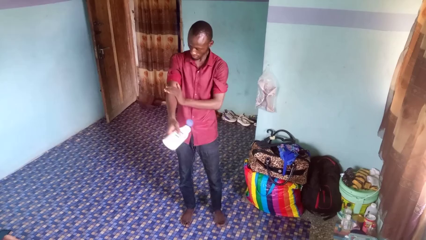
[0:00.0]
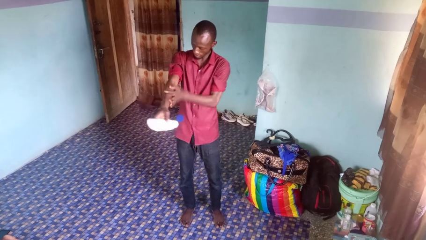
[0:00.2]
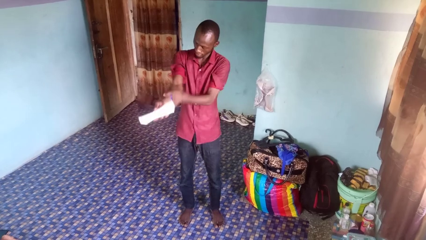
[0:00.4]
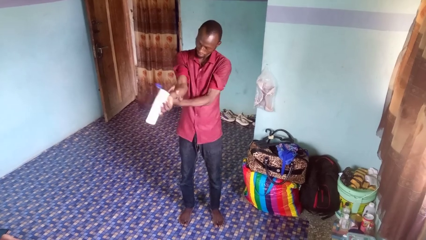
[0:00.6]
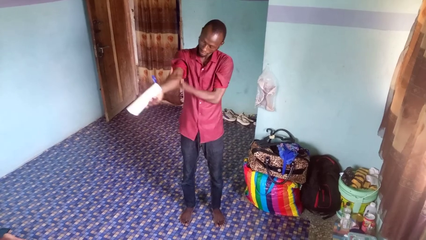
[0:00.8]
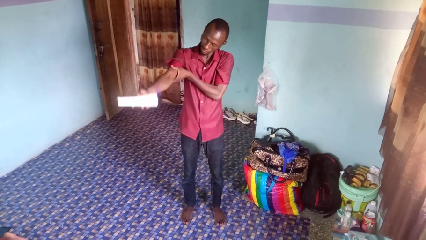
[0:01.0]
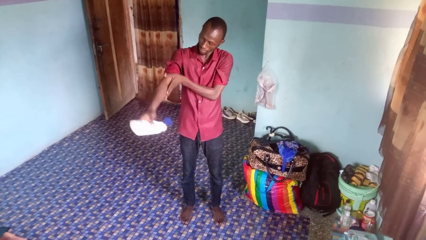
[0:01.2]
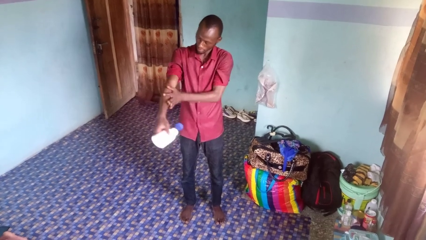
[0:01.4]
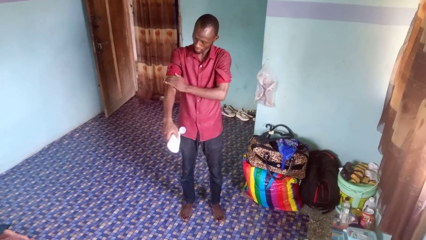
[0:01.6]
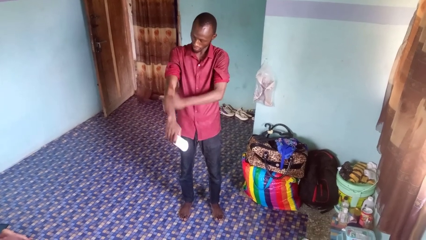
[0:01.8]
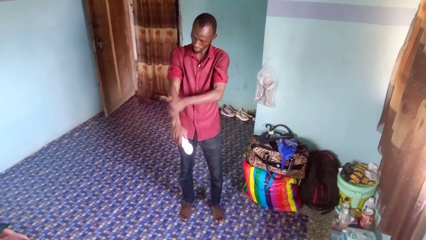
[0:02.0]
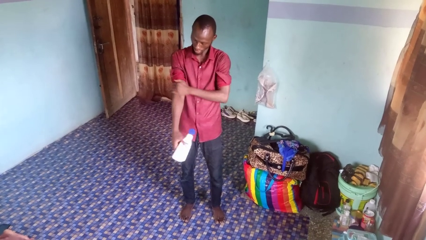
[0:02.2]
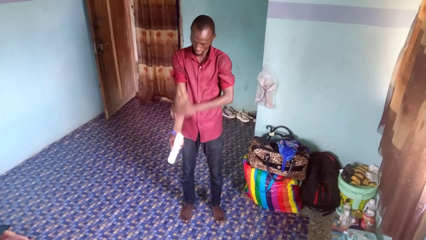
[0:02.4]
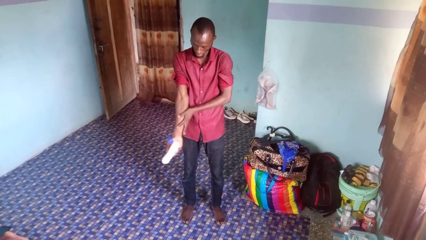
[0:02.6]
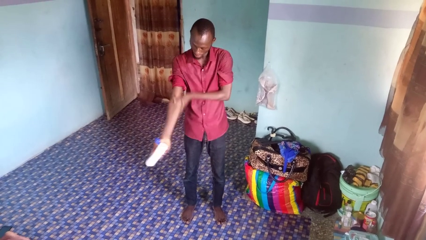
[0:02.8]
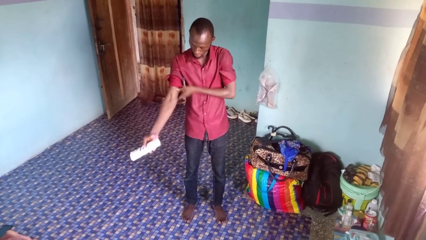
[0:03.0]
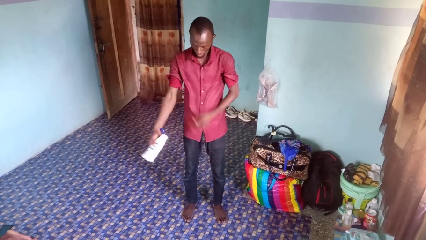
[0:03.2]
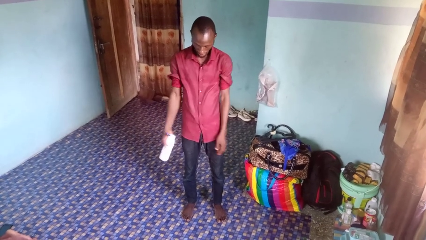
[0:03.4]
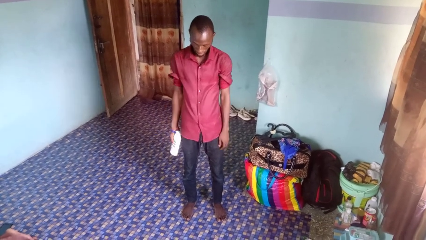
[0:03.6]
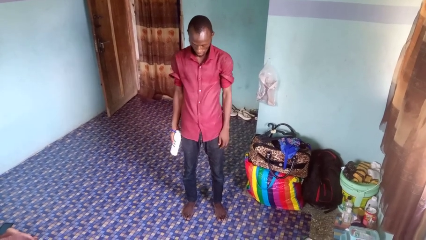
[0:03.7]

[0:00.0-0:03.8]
person applies sunscreen

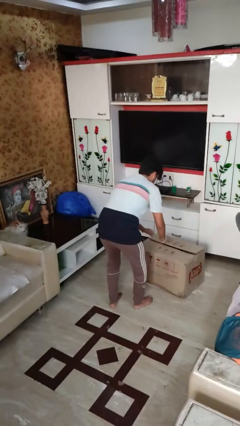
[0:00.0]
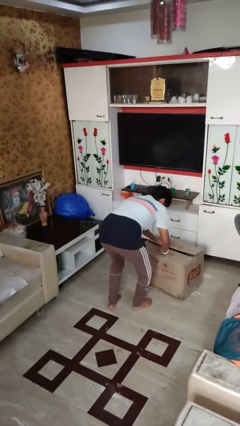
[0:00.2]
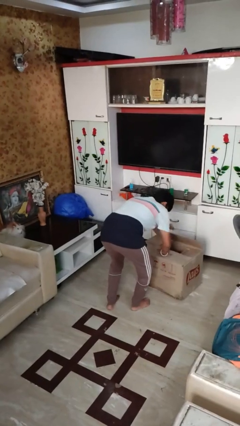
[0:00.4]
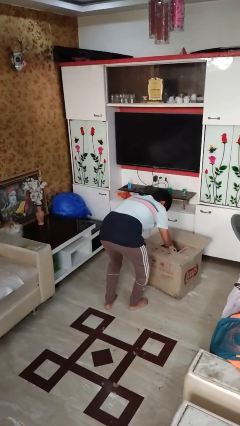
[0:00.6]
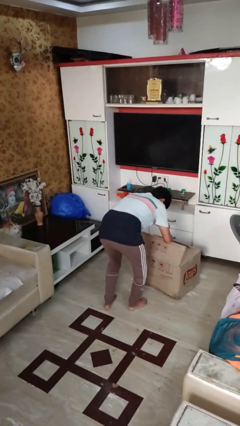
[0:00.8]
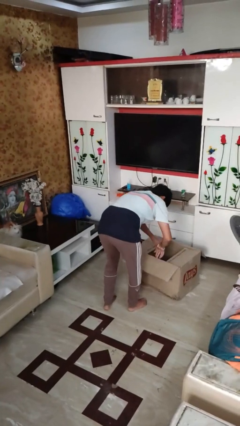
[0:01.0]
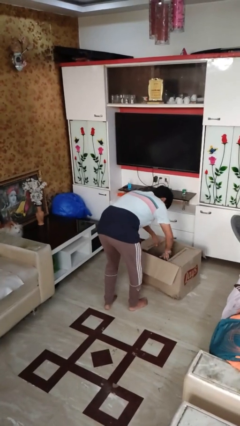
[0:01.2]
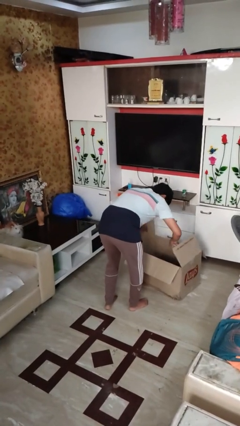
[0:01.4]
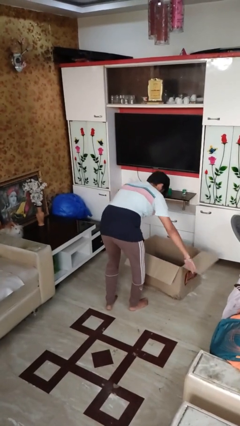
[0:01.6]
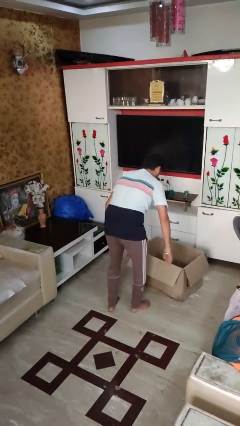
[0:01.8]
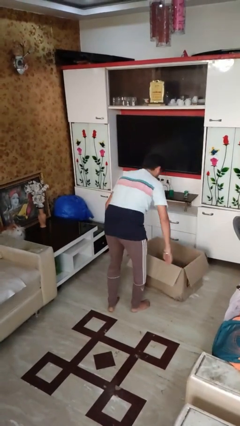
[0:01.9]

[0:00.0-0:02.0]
person opens box

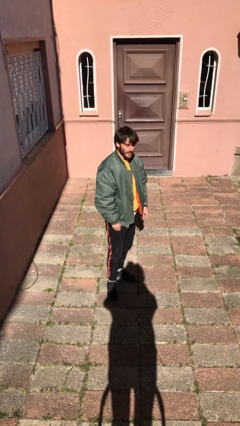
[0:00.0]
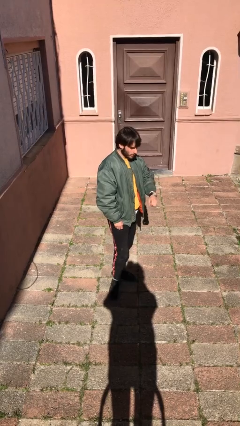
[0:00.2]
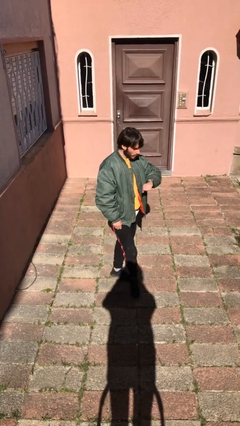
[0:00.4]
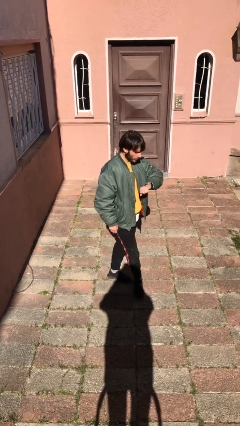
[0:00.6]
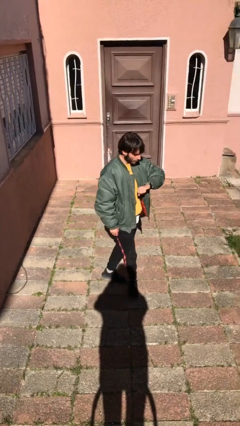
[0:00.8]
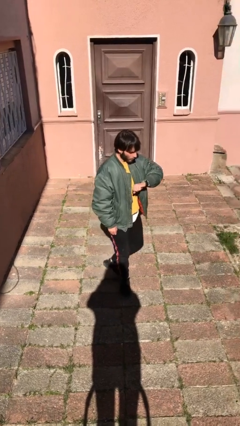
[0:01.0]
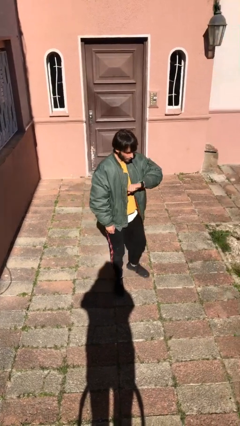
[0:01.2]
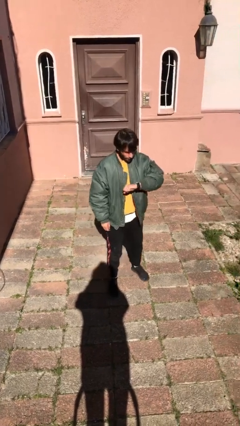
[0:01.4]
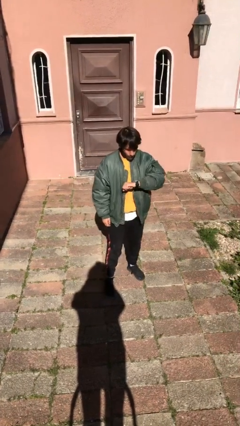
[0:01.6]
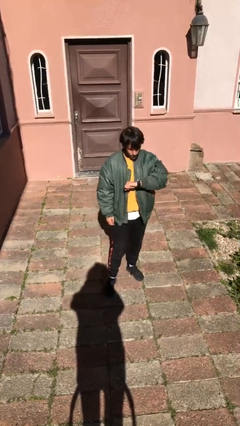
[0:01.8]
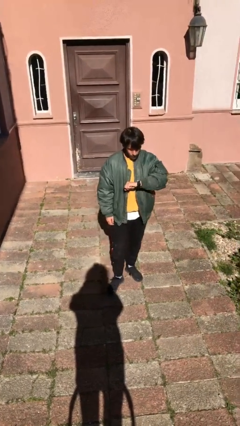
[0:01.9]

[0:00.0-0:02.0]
person looks at wristwatch

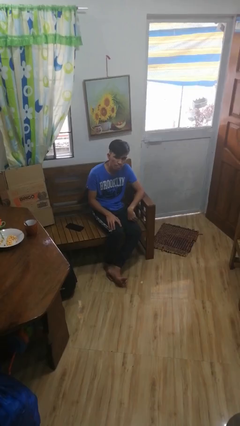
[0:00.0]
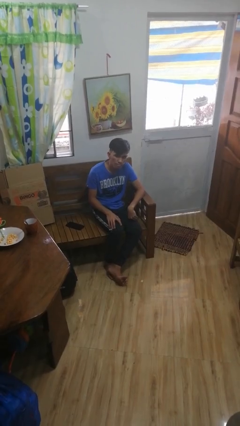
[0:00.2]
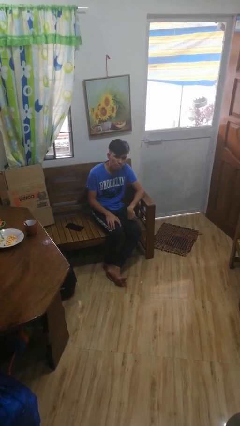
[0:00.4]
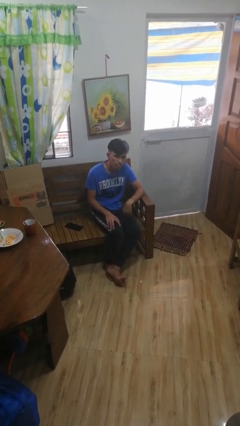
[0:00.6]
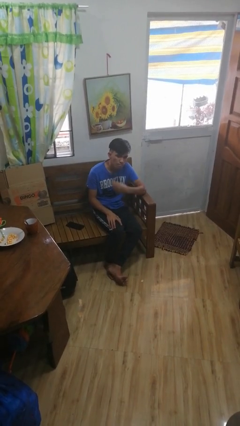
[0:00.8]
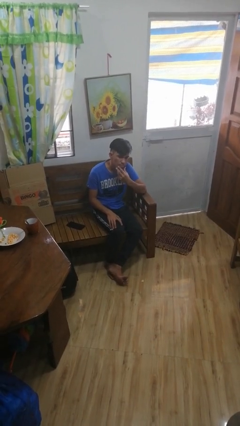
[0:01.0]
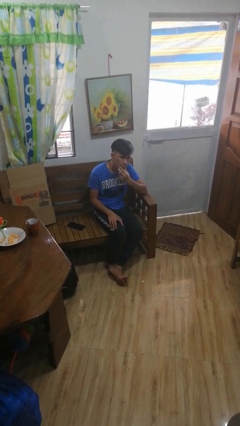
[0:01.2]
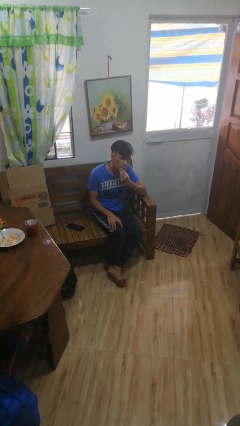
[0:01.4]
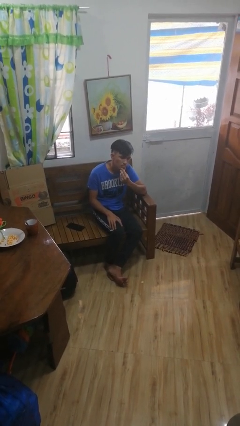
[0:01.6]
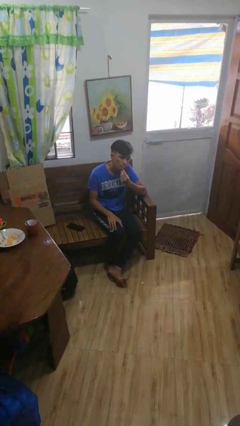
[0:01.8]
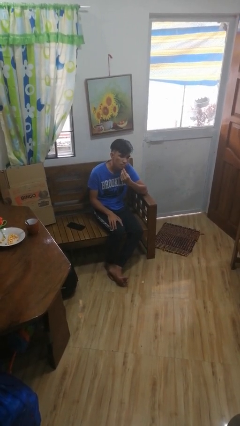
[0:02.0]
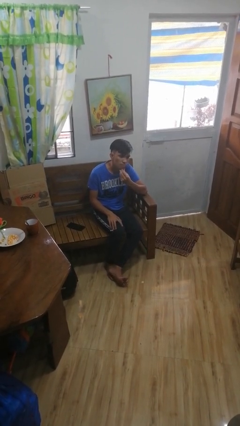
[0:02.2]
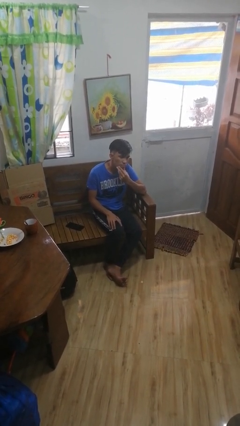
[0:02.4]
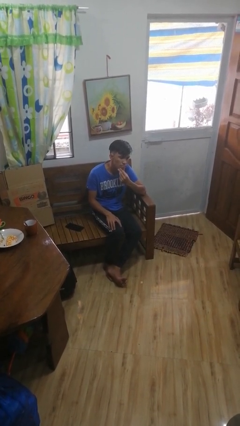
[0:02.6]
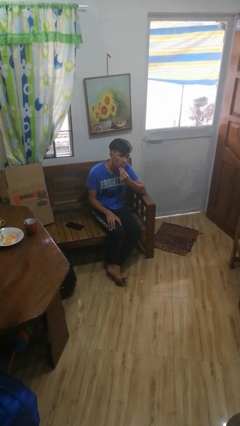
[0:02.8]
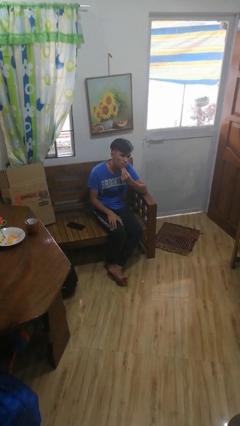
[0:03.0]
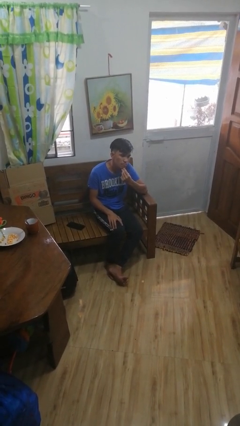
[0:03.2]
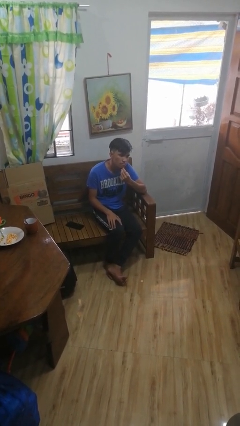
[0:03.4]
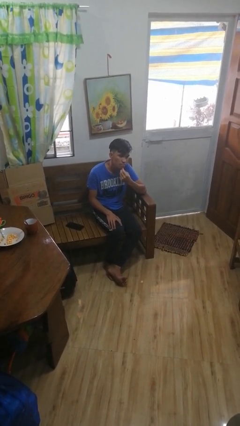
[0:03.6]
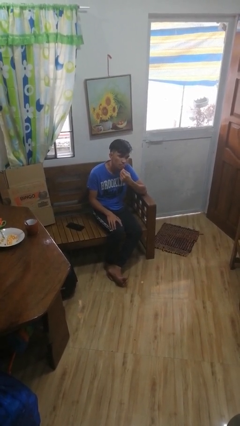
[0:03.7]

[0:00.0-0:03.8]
person strokes chin

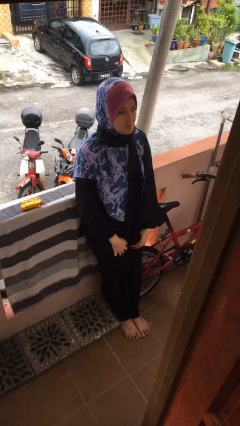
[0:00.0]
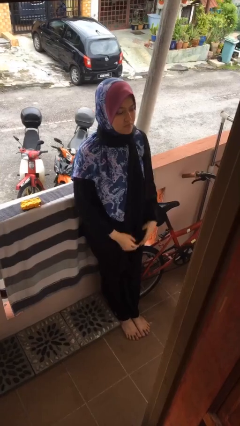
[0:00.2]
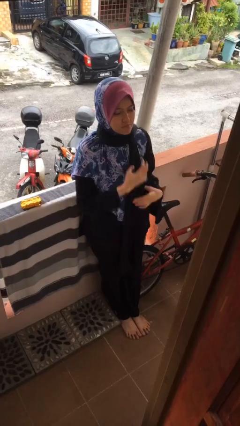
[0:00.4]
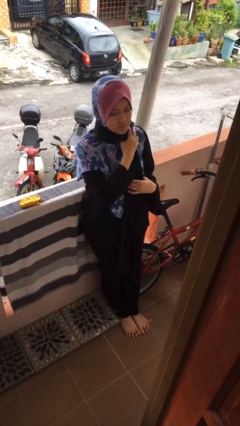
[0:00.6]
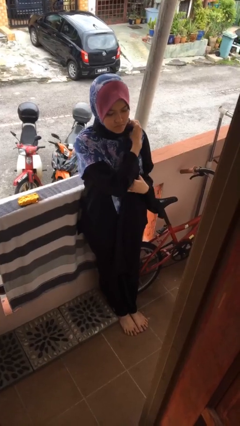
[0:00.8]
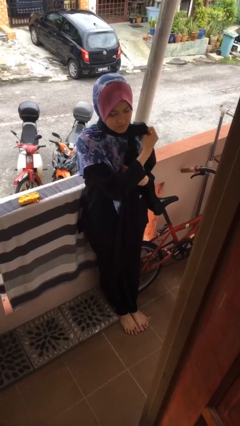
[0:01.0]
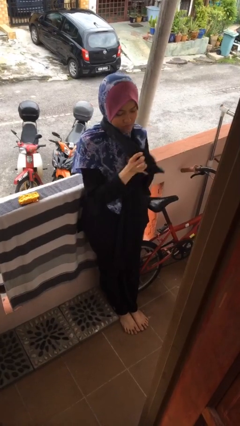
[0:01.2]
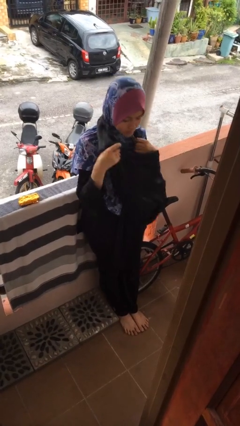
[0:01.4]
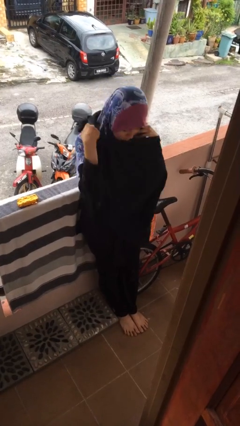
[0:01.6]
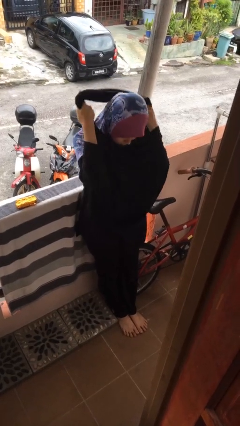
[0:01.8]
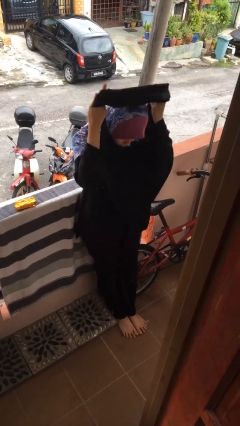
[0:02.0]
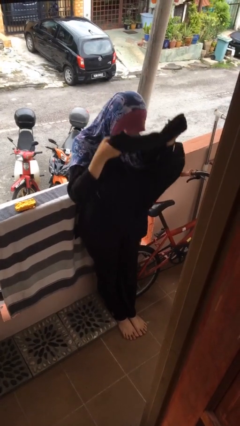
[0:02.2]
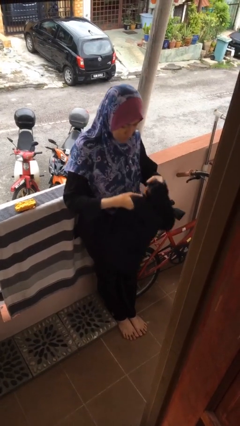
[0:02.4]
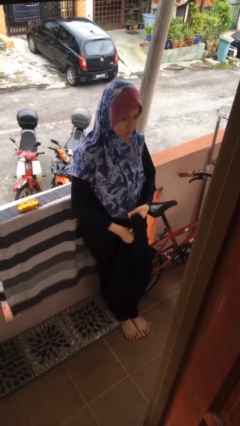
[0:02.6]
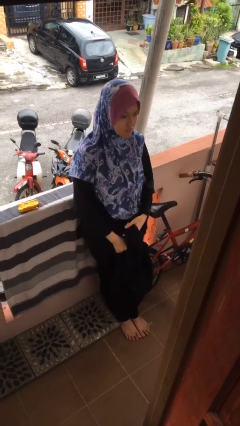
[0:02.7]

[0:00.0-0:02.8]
person takes off scarf

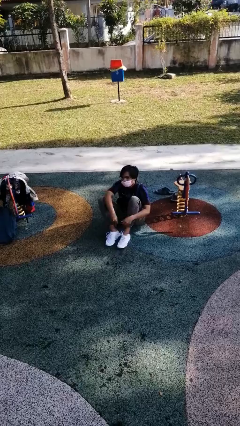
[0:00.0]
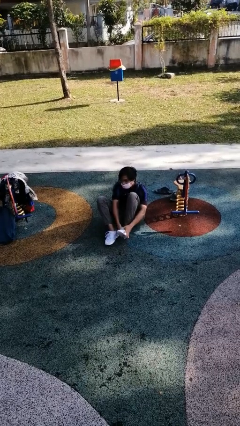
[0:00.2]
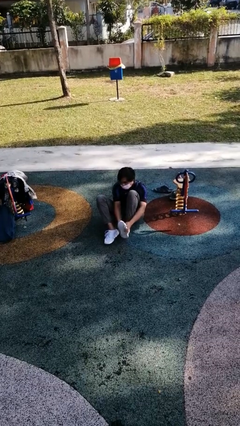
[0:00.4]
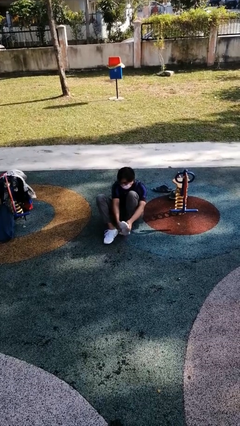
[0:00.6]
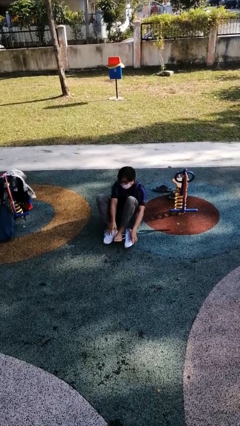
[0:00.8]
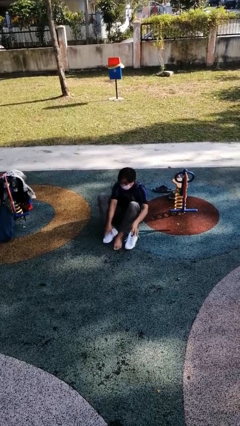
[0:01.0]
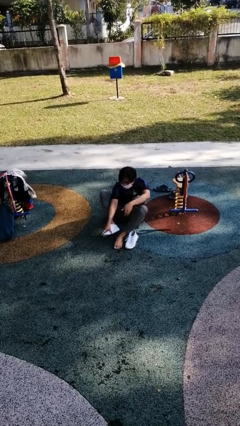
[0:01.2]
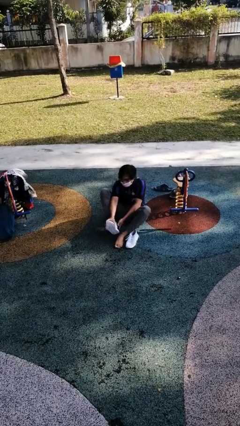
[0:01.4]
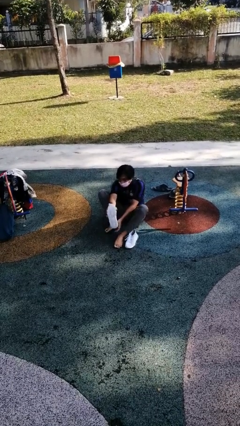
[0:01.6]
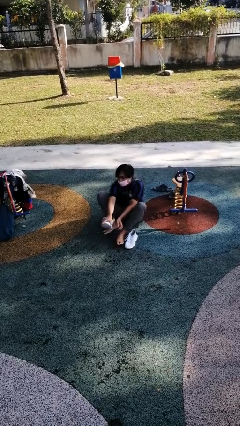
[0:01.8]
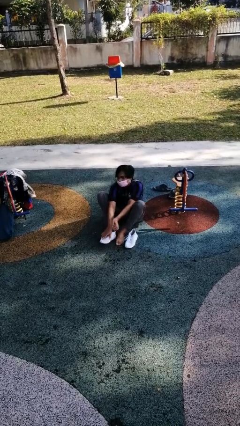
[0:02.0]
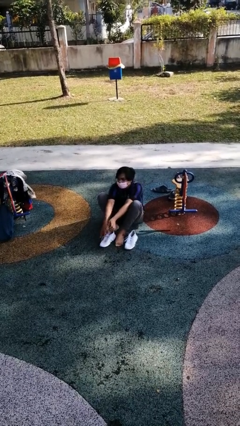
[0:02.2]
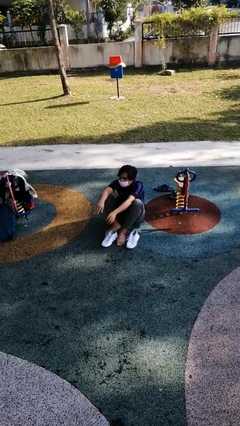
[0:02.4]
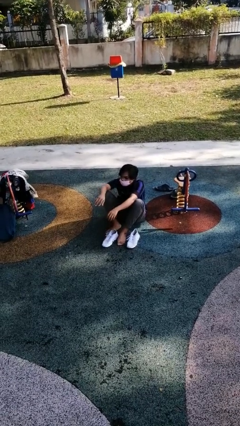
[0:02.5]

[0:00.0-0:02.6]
person takes off shoes

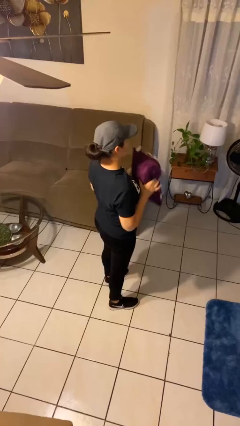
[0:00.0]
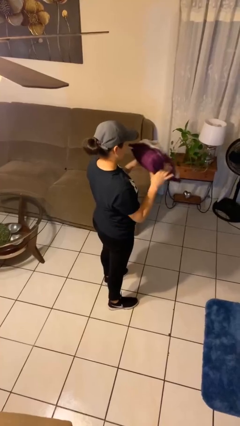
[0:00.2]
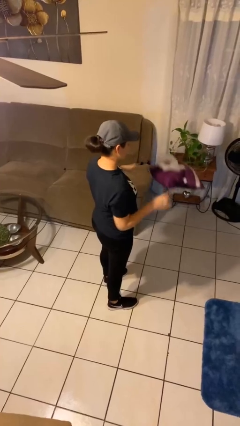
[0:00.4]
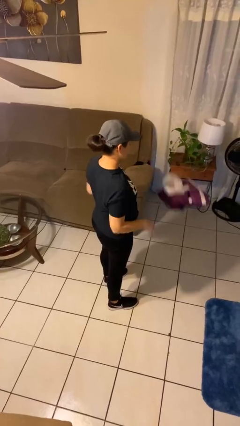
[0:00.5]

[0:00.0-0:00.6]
person throws object to ground
